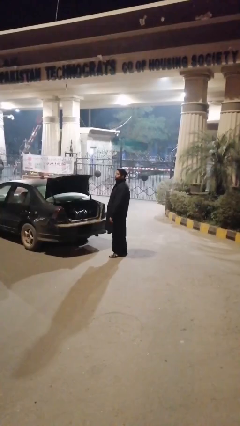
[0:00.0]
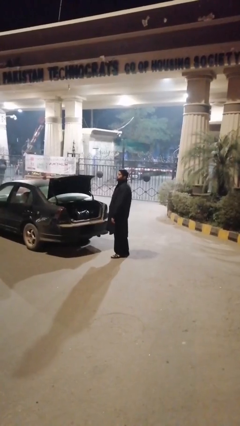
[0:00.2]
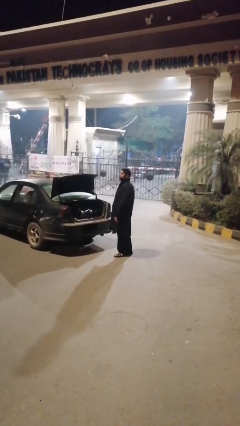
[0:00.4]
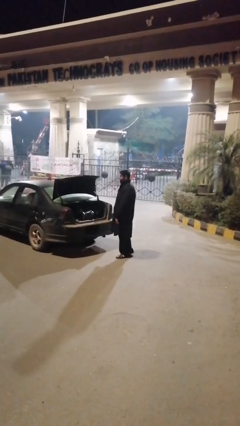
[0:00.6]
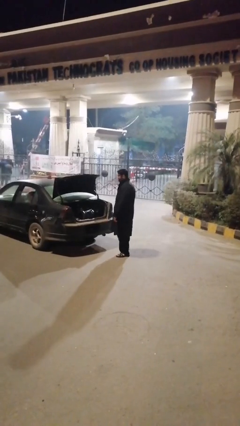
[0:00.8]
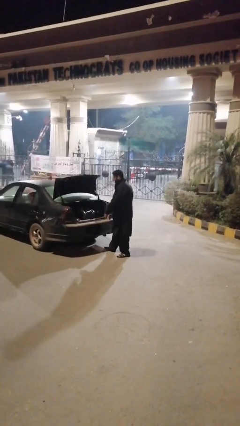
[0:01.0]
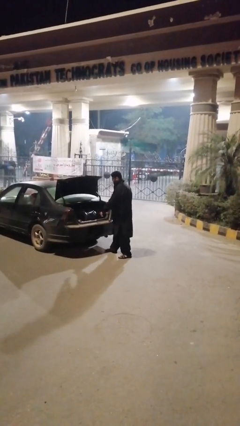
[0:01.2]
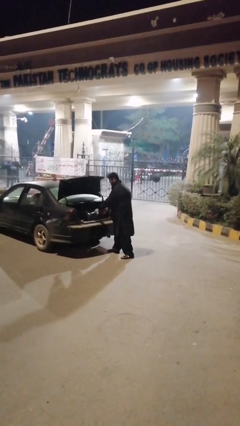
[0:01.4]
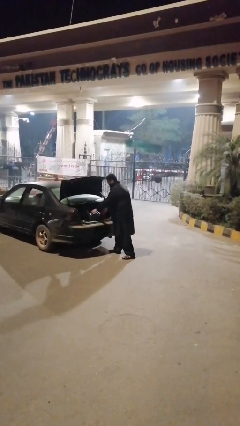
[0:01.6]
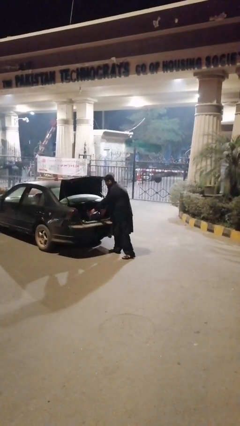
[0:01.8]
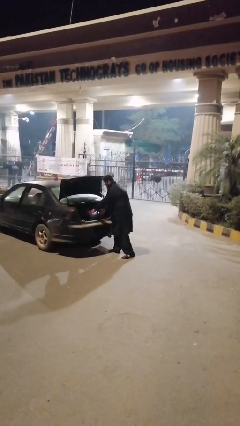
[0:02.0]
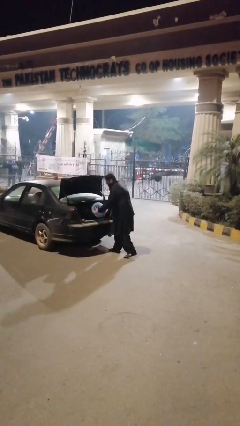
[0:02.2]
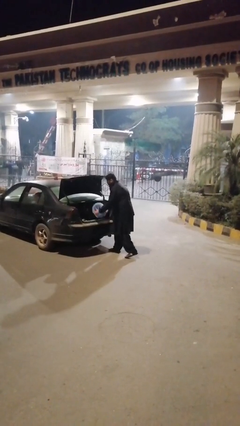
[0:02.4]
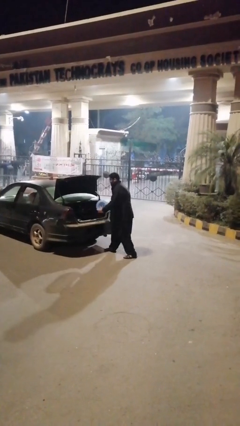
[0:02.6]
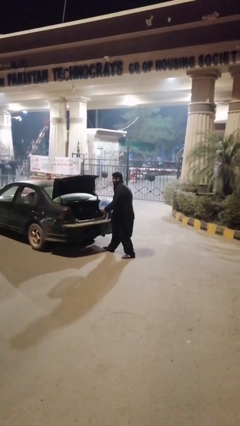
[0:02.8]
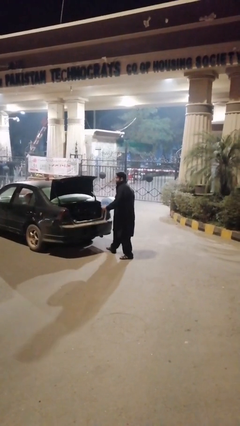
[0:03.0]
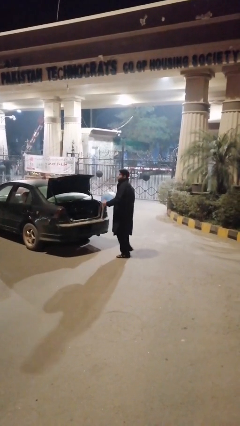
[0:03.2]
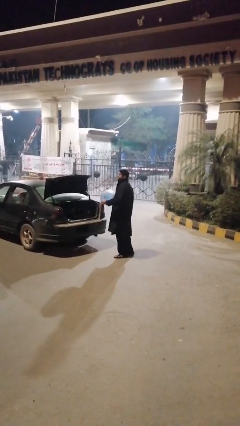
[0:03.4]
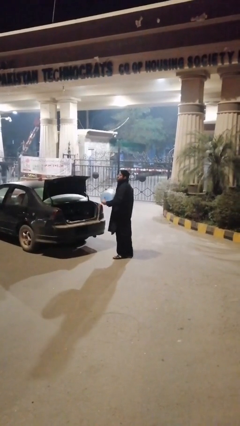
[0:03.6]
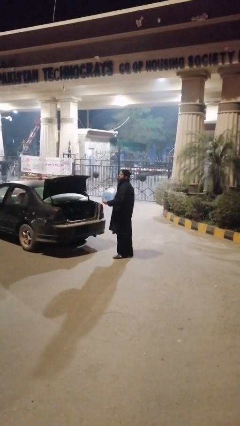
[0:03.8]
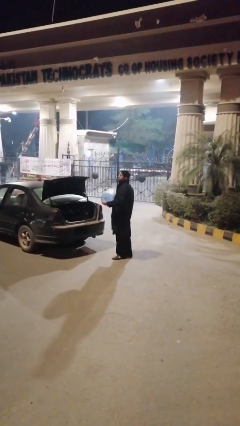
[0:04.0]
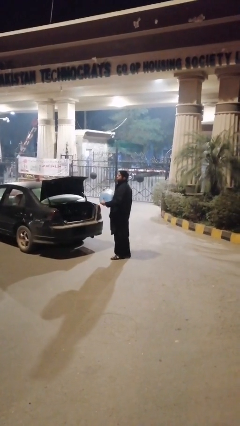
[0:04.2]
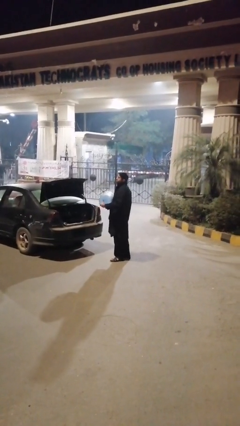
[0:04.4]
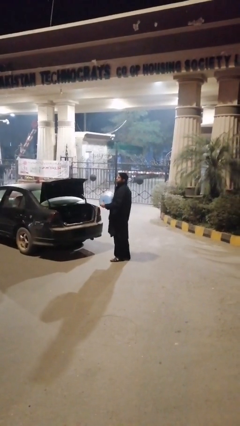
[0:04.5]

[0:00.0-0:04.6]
person unloads car

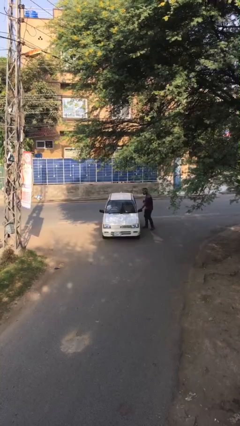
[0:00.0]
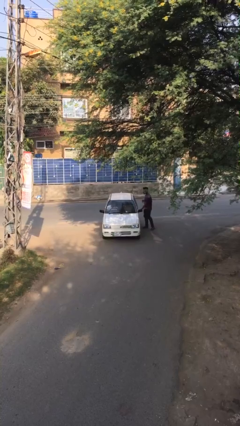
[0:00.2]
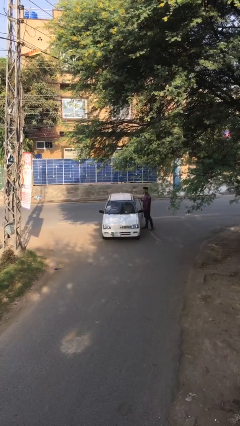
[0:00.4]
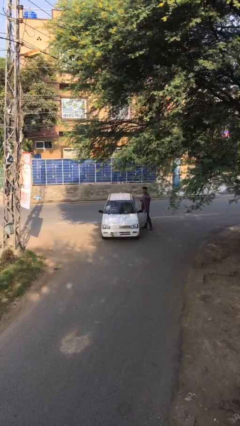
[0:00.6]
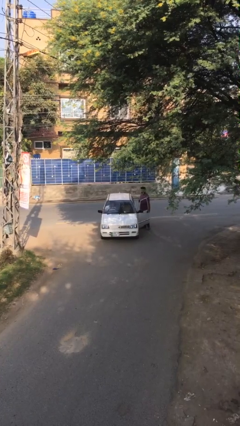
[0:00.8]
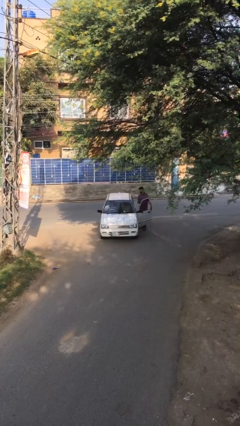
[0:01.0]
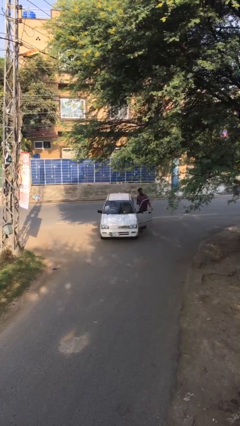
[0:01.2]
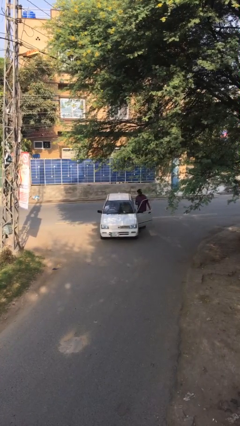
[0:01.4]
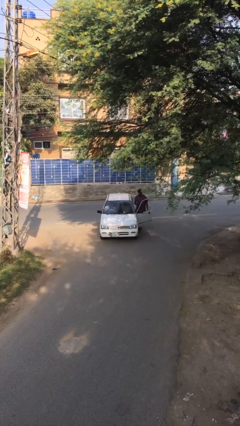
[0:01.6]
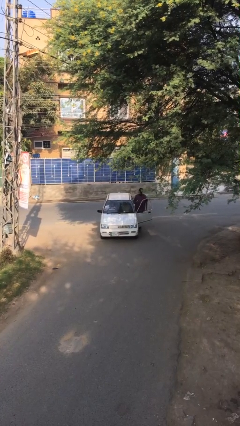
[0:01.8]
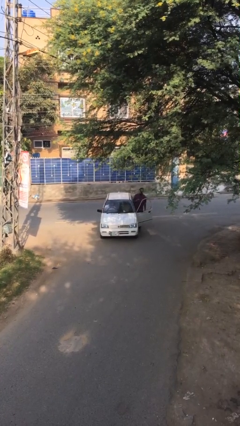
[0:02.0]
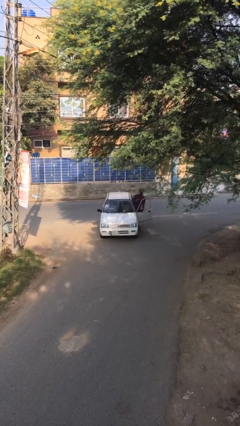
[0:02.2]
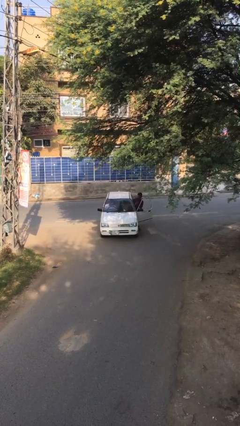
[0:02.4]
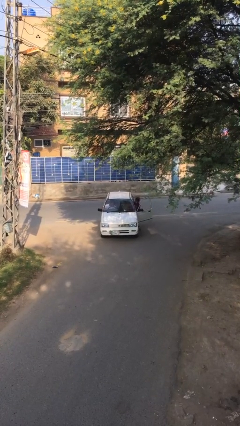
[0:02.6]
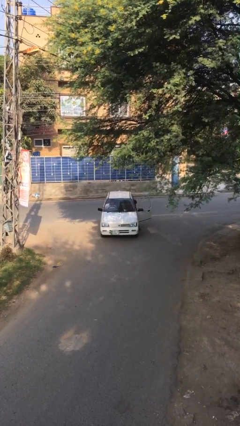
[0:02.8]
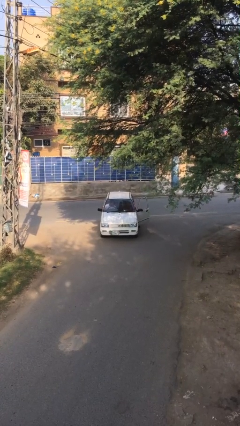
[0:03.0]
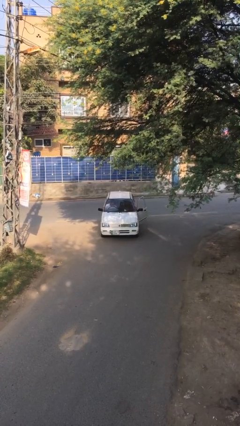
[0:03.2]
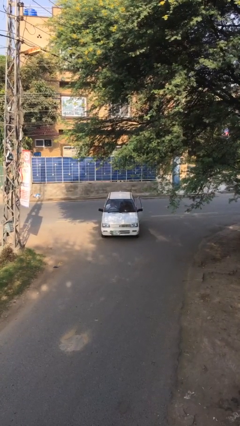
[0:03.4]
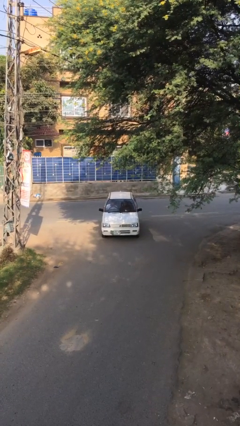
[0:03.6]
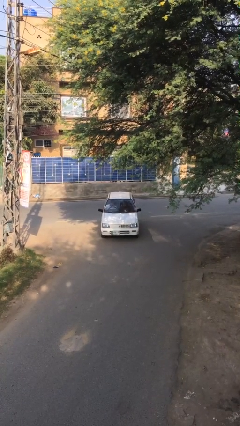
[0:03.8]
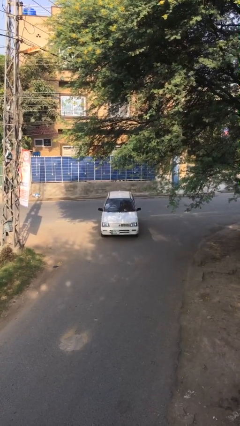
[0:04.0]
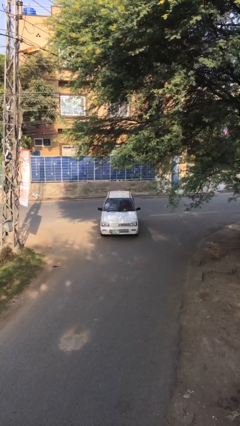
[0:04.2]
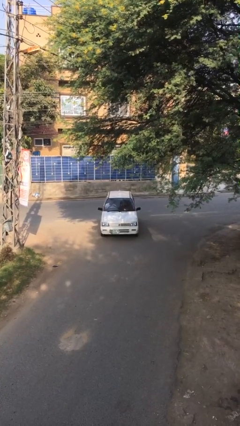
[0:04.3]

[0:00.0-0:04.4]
car picks up person

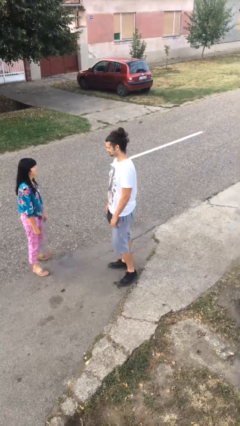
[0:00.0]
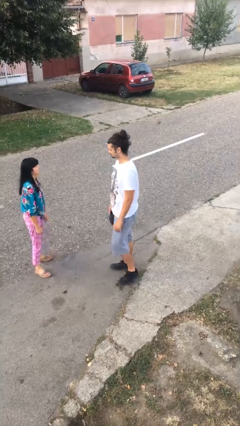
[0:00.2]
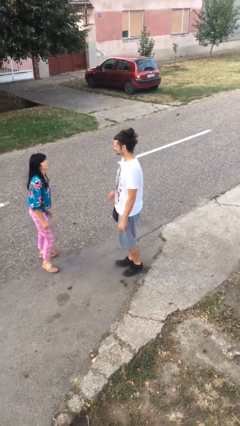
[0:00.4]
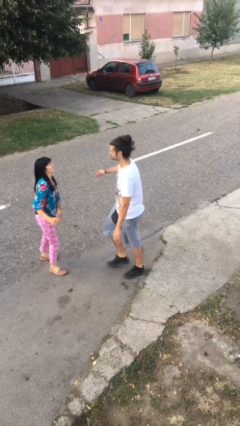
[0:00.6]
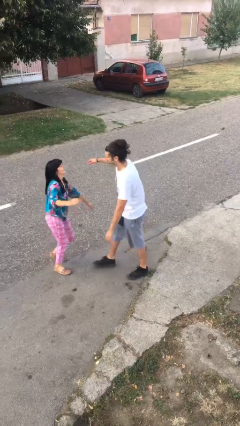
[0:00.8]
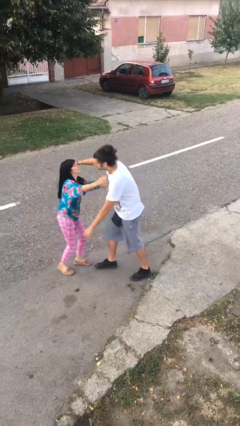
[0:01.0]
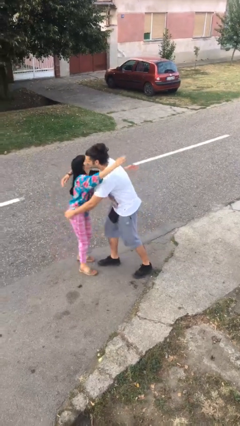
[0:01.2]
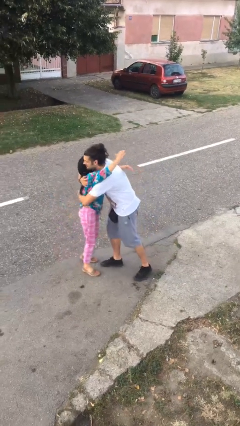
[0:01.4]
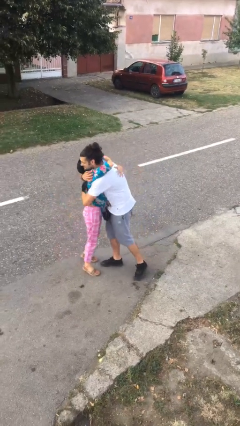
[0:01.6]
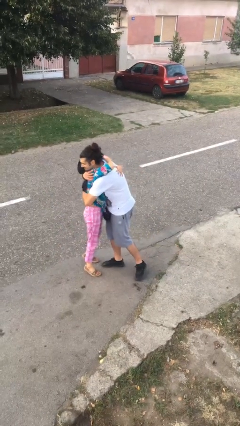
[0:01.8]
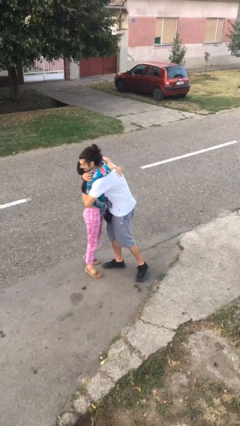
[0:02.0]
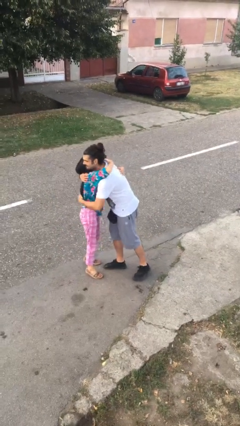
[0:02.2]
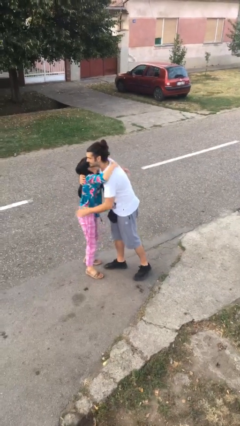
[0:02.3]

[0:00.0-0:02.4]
person embraces person

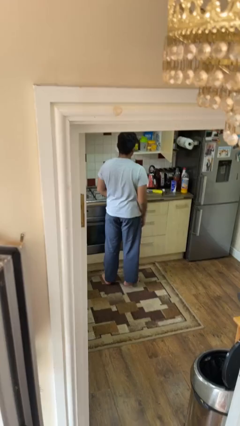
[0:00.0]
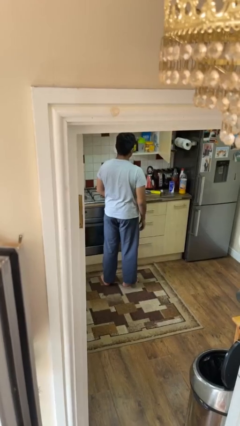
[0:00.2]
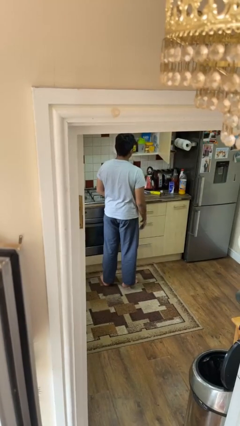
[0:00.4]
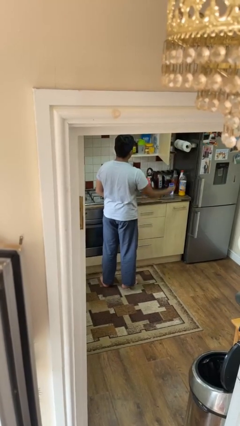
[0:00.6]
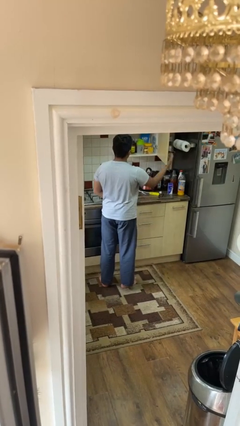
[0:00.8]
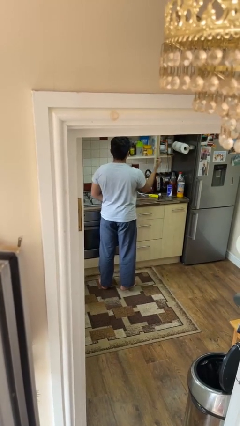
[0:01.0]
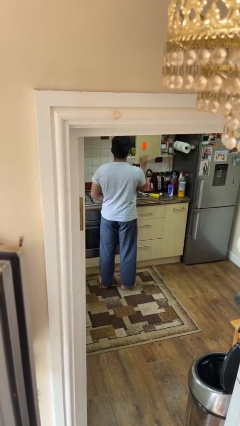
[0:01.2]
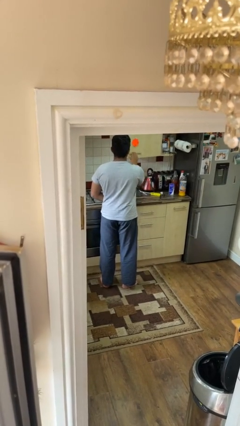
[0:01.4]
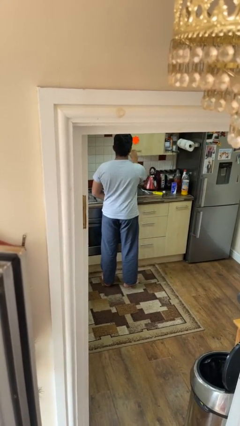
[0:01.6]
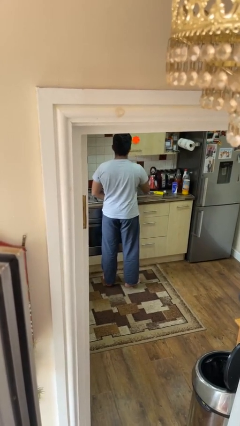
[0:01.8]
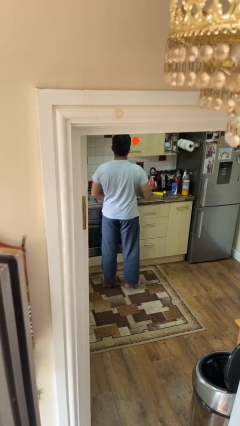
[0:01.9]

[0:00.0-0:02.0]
person closes cabinet

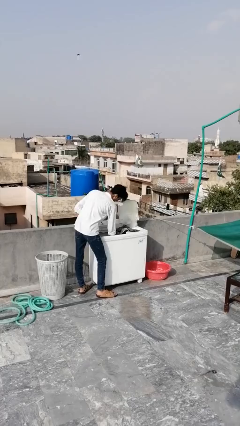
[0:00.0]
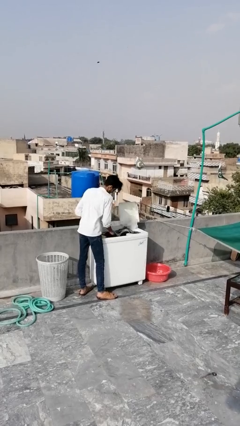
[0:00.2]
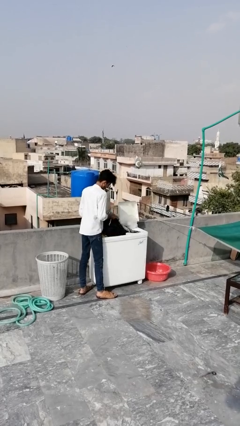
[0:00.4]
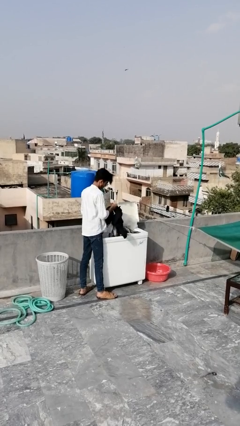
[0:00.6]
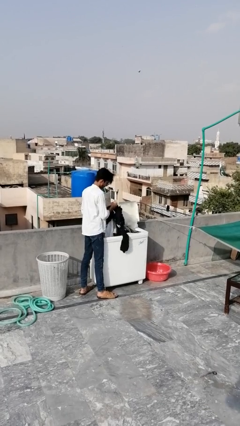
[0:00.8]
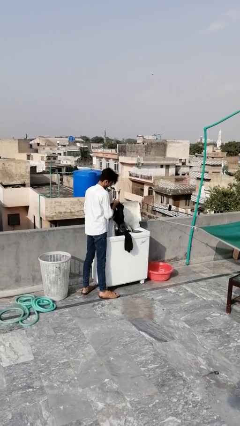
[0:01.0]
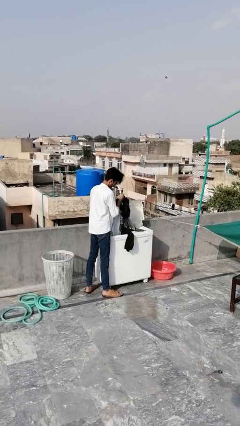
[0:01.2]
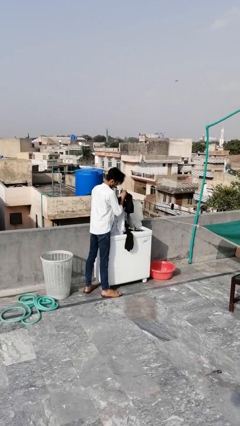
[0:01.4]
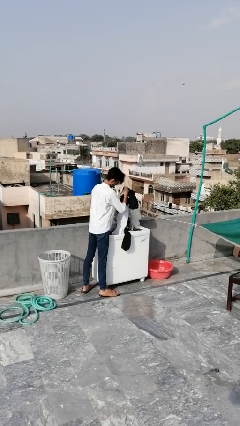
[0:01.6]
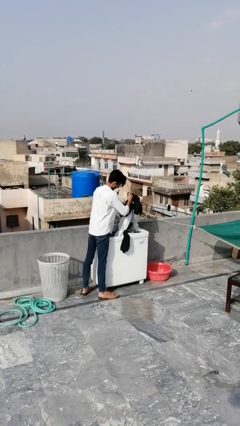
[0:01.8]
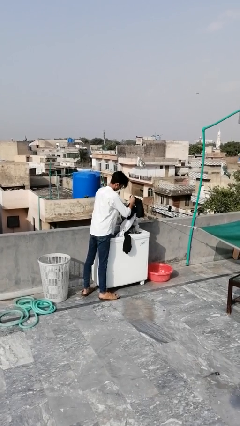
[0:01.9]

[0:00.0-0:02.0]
person unloads clotheswasher

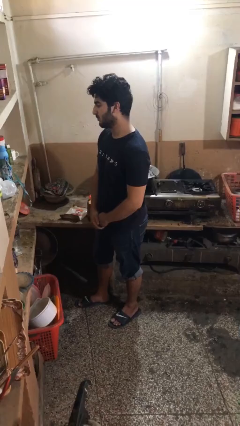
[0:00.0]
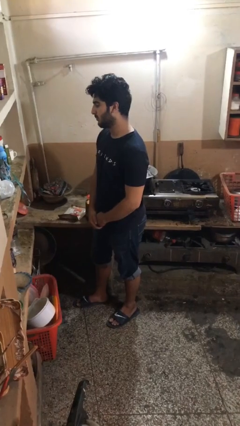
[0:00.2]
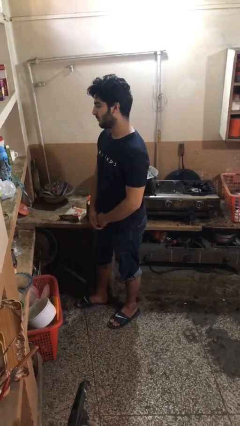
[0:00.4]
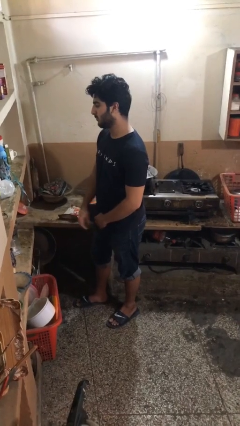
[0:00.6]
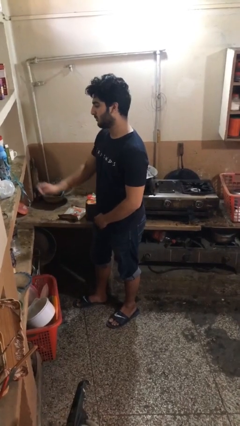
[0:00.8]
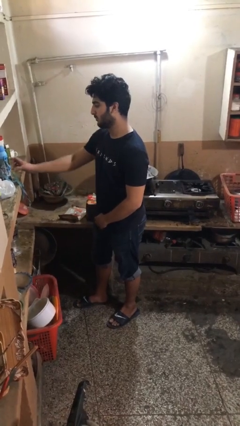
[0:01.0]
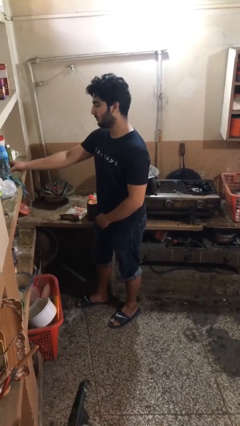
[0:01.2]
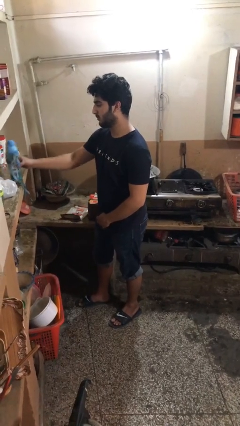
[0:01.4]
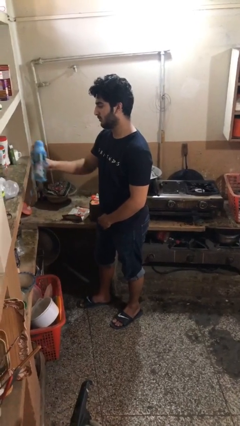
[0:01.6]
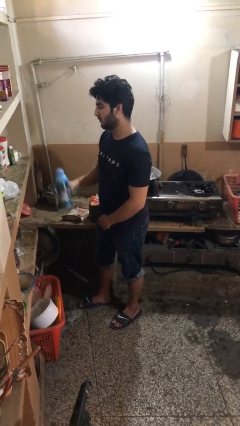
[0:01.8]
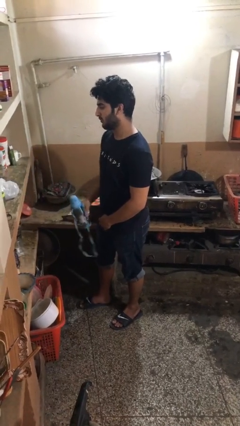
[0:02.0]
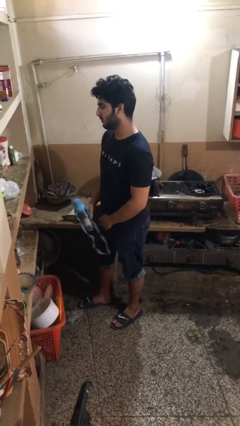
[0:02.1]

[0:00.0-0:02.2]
person picks up object from countertop
